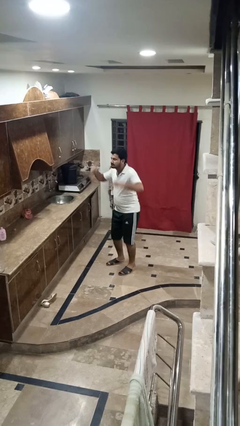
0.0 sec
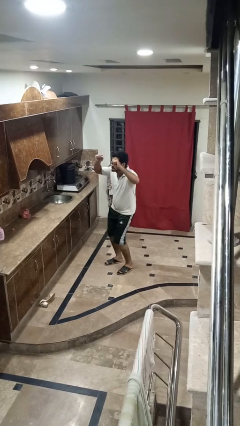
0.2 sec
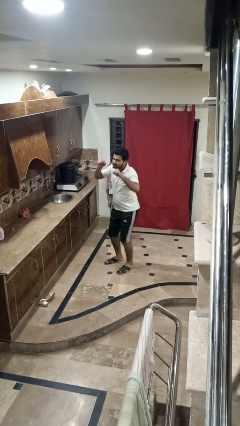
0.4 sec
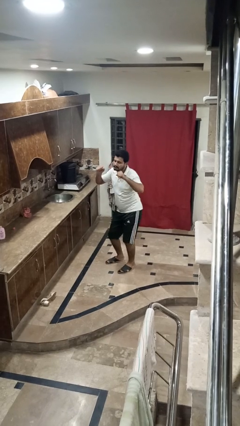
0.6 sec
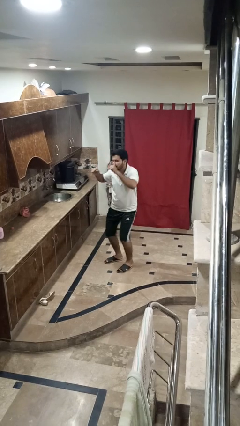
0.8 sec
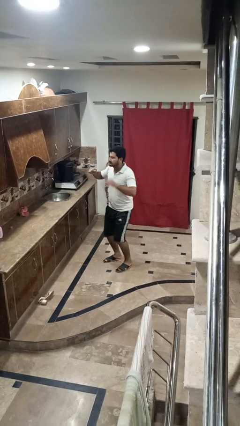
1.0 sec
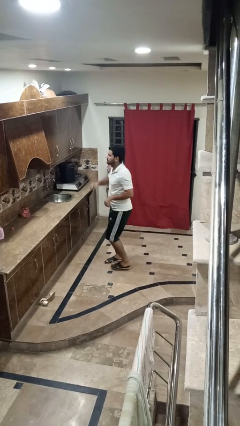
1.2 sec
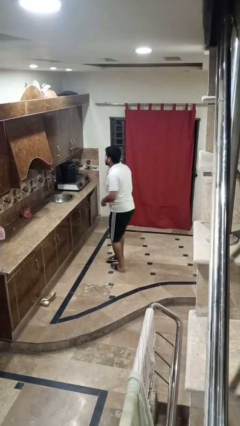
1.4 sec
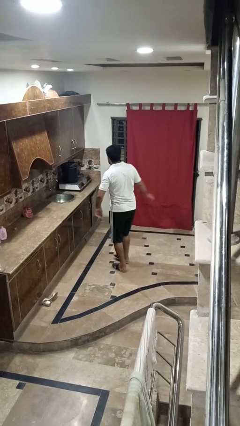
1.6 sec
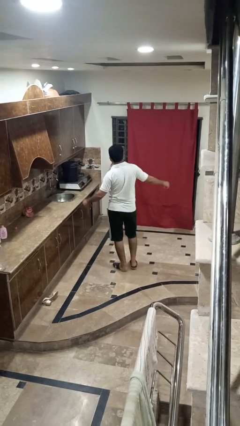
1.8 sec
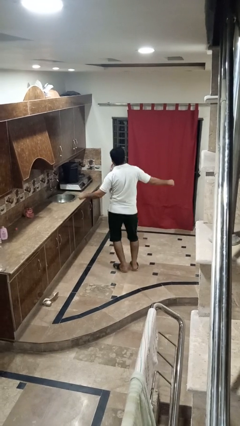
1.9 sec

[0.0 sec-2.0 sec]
person wiggles hips

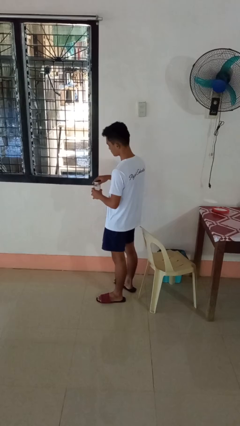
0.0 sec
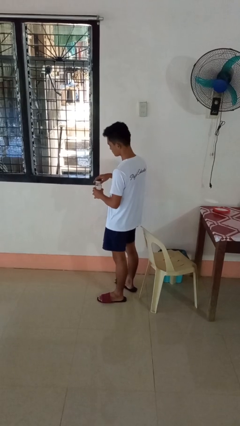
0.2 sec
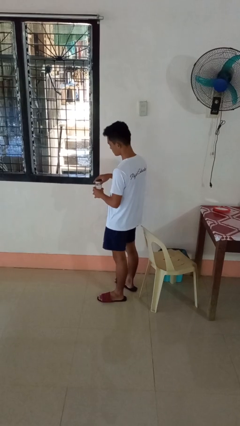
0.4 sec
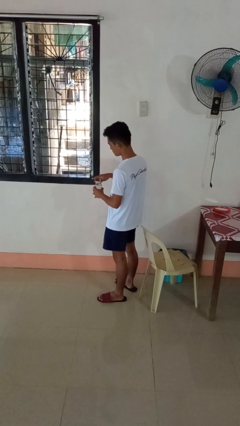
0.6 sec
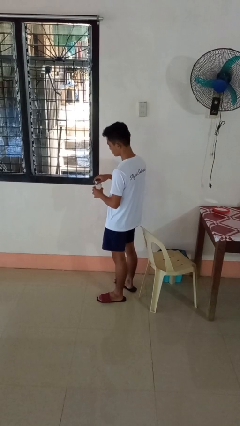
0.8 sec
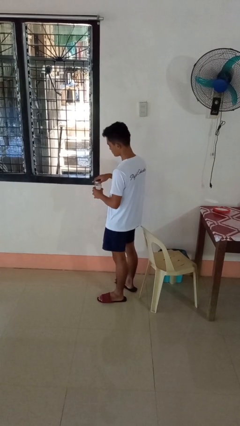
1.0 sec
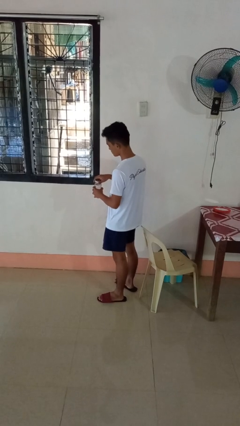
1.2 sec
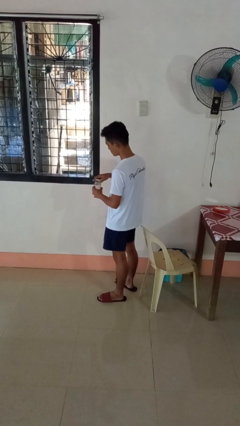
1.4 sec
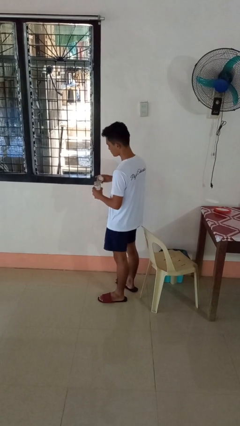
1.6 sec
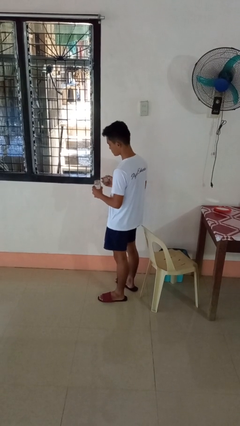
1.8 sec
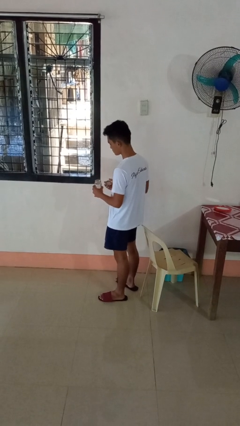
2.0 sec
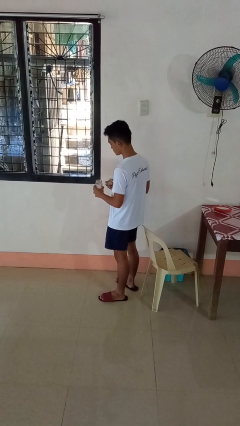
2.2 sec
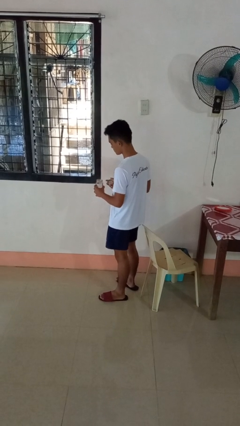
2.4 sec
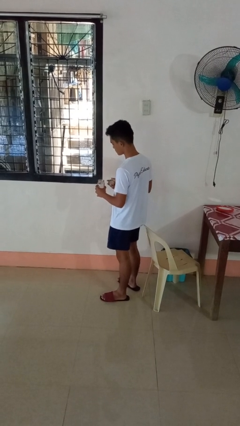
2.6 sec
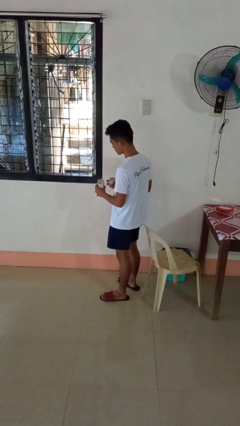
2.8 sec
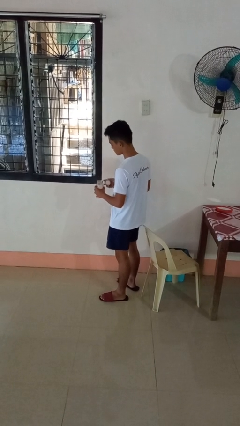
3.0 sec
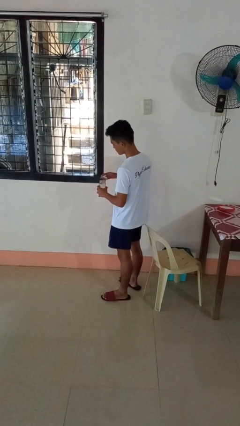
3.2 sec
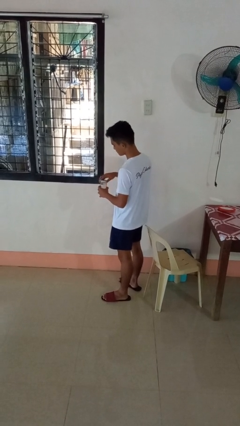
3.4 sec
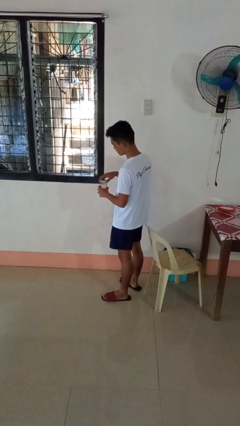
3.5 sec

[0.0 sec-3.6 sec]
person opens jar

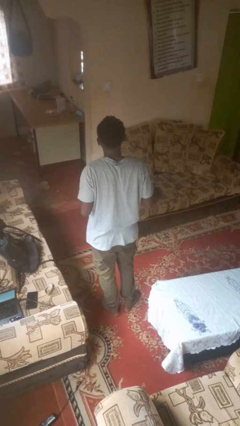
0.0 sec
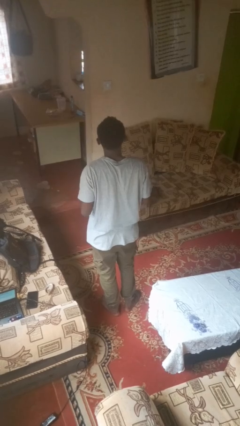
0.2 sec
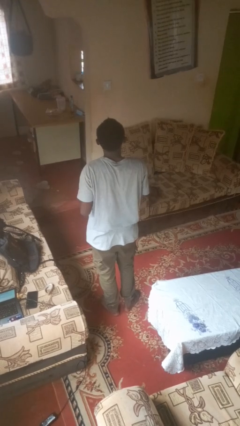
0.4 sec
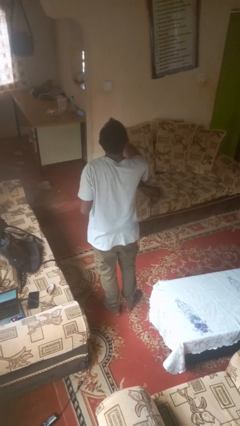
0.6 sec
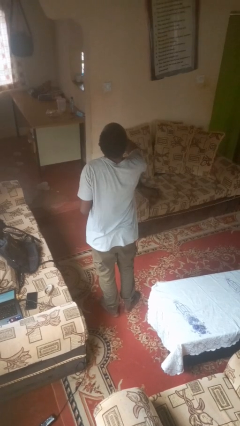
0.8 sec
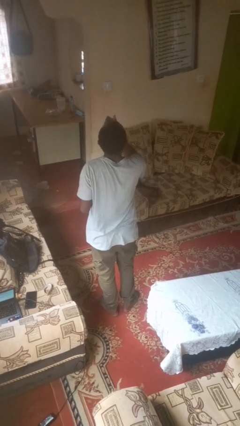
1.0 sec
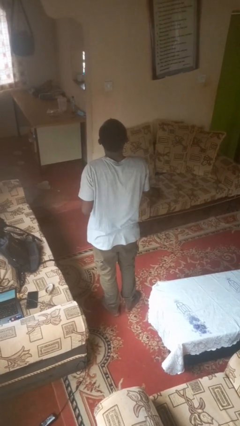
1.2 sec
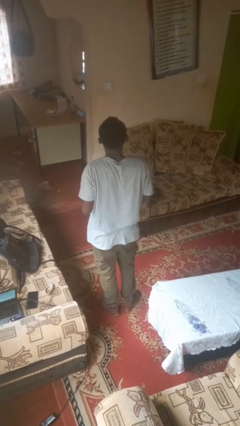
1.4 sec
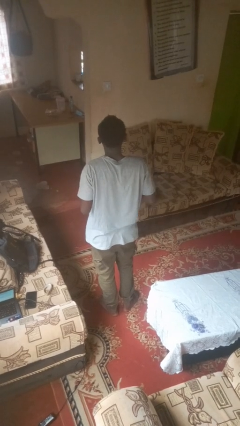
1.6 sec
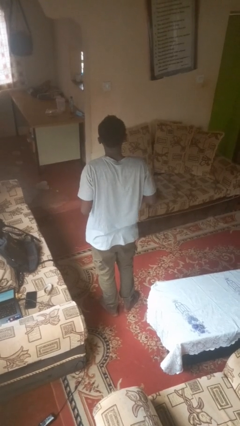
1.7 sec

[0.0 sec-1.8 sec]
person takes medicine pills

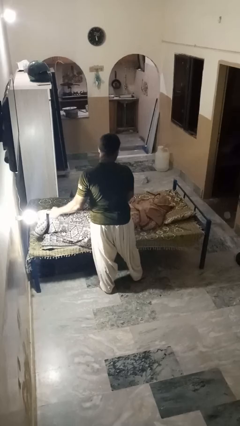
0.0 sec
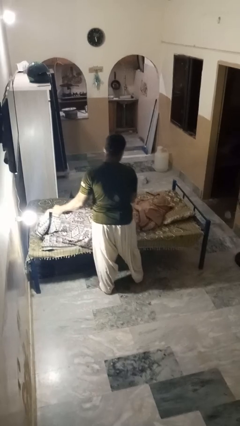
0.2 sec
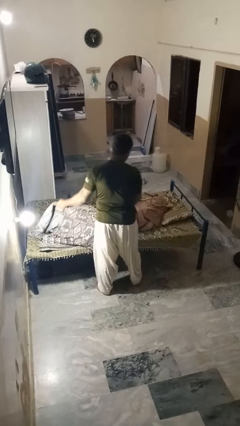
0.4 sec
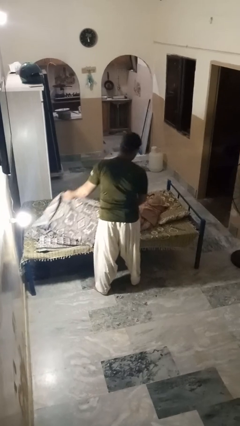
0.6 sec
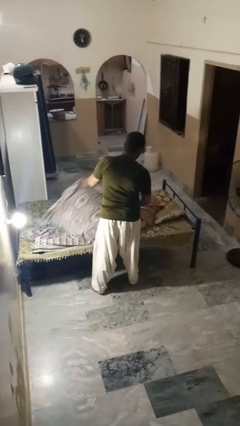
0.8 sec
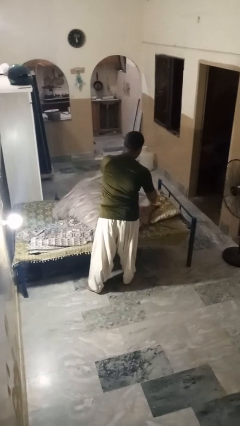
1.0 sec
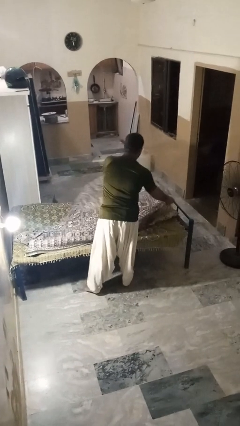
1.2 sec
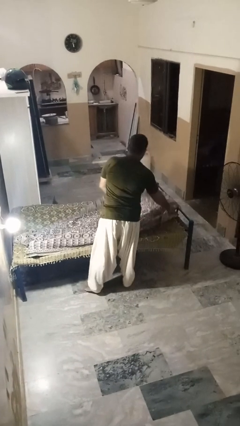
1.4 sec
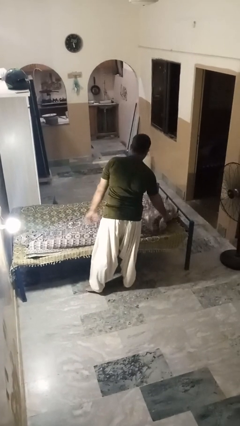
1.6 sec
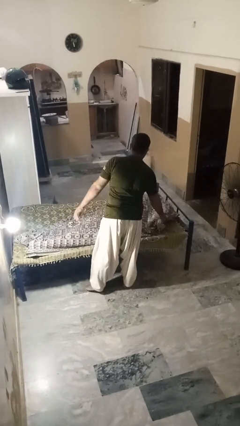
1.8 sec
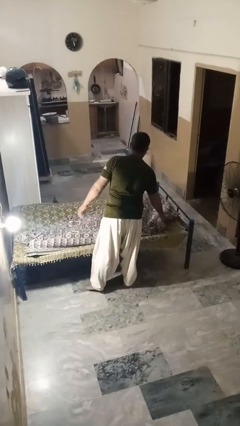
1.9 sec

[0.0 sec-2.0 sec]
person covers friend with blanket

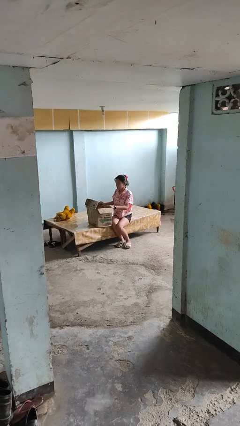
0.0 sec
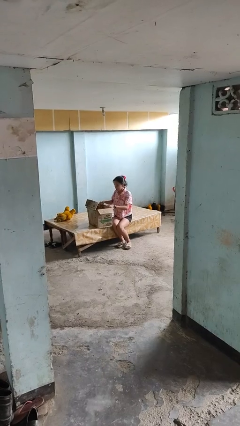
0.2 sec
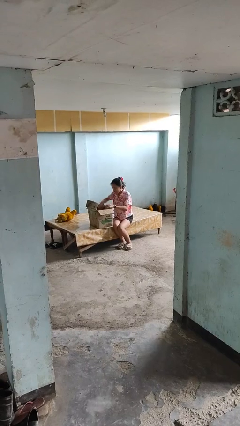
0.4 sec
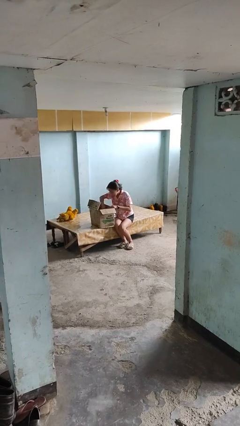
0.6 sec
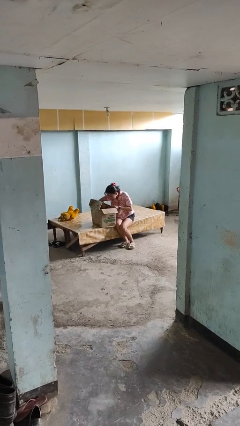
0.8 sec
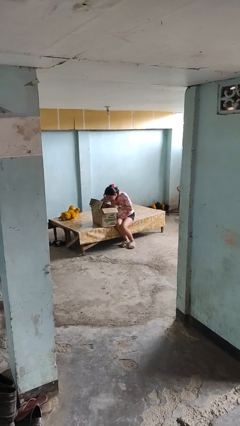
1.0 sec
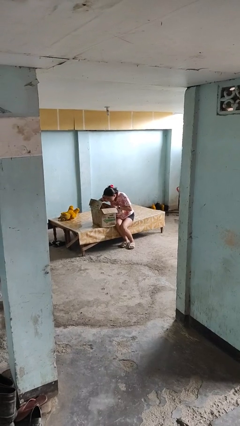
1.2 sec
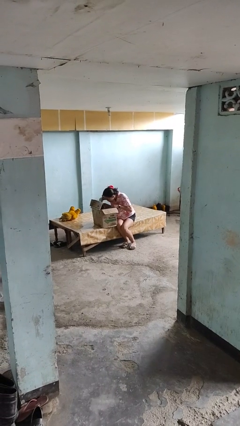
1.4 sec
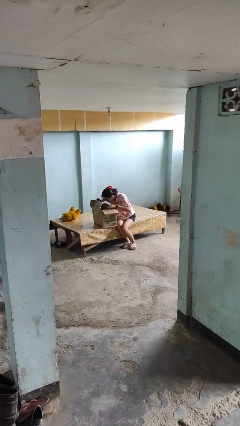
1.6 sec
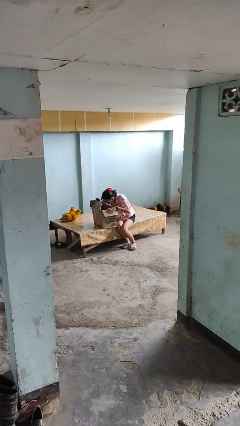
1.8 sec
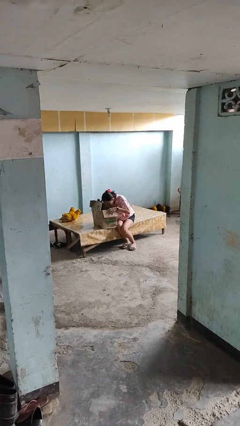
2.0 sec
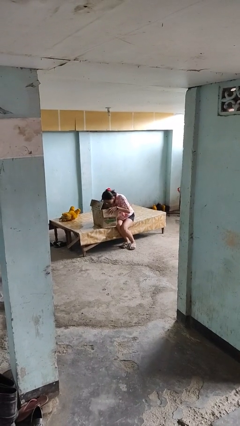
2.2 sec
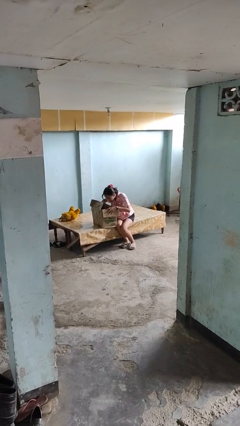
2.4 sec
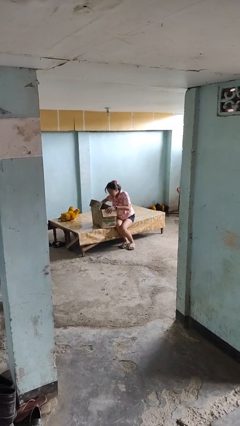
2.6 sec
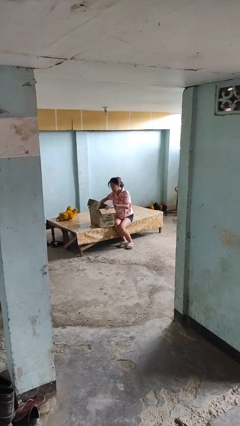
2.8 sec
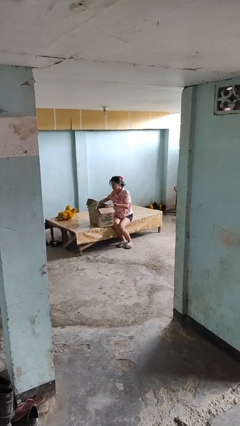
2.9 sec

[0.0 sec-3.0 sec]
person searches in box

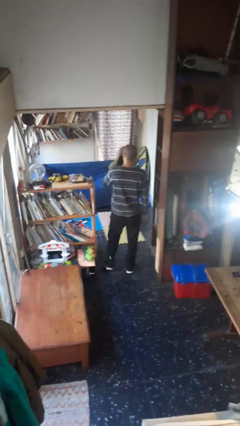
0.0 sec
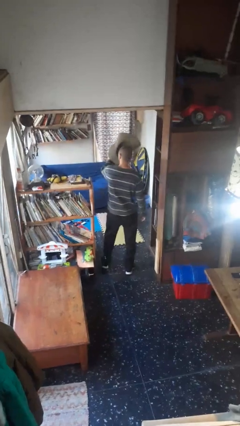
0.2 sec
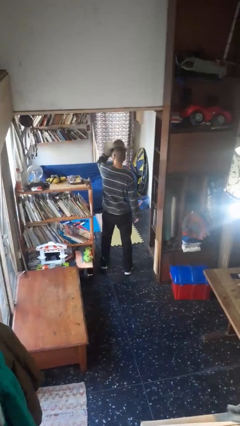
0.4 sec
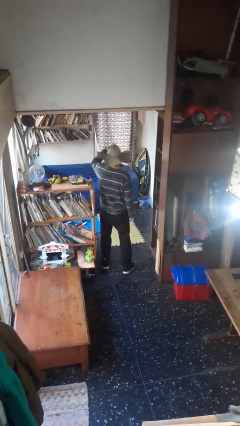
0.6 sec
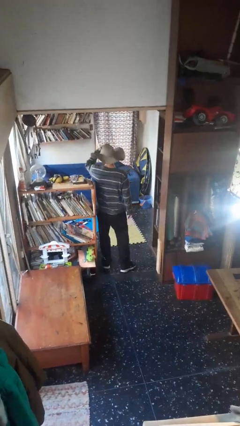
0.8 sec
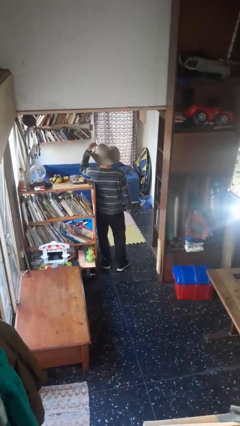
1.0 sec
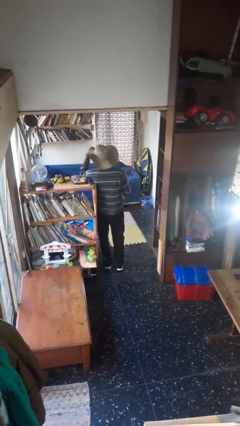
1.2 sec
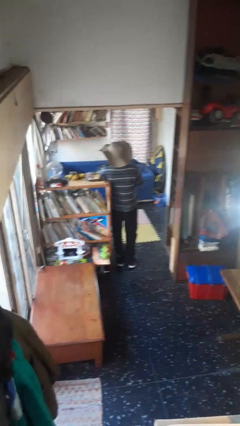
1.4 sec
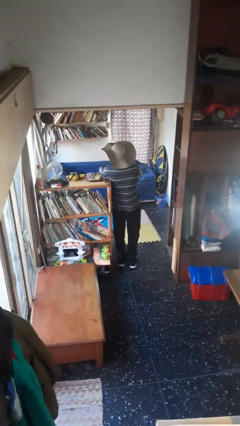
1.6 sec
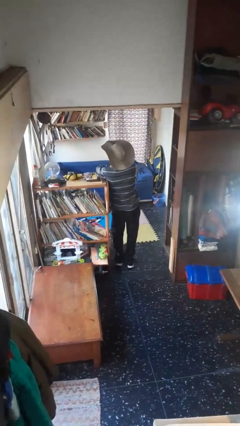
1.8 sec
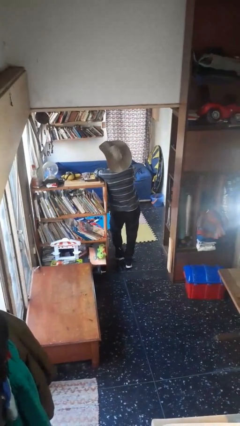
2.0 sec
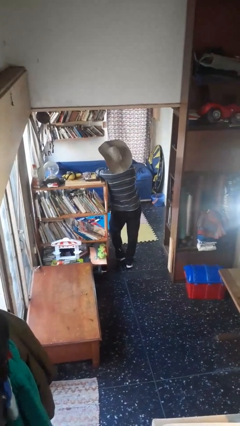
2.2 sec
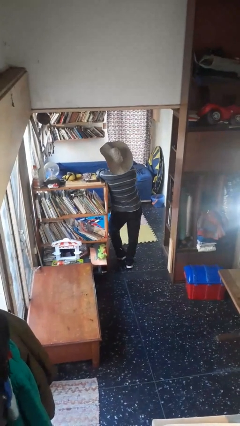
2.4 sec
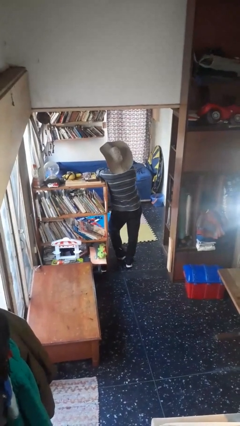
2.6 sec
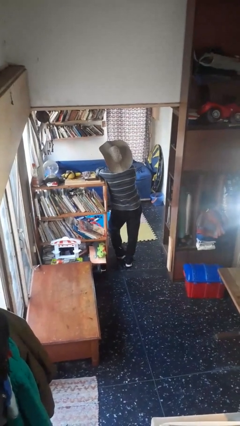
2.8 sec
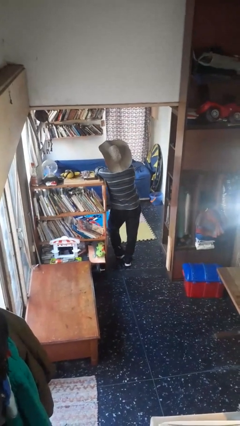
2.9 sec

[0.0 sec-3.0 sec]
person puts on hat

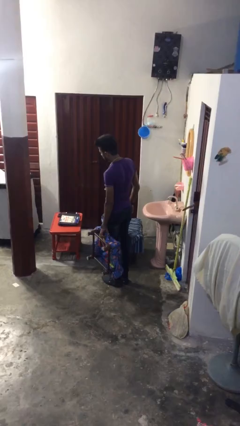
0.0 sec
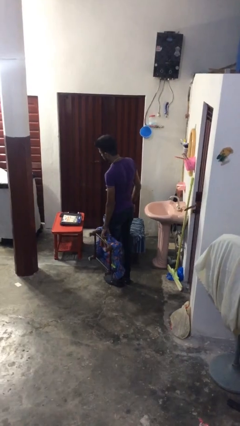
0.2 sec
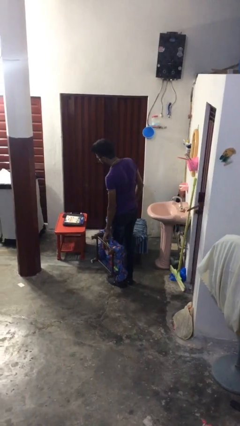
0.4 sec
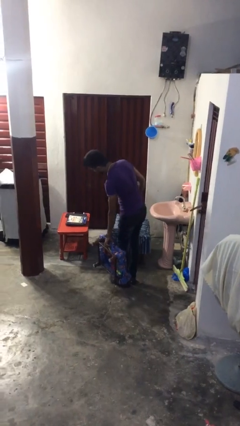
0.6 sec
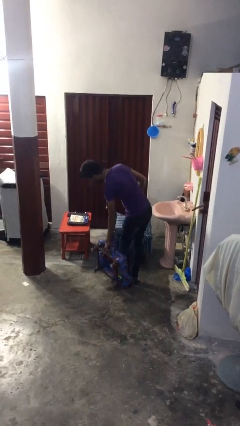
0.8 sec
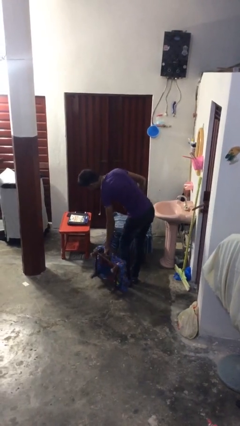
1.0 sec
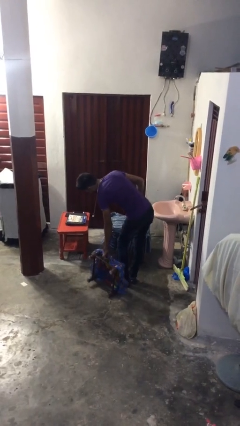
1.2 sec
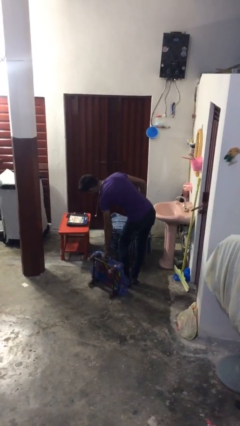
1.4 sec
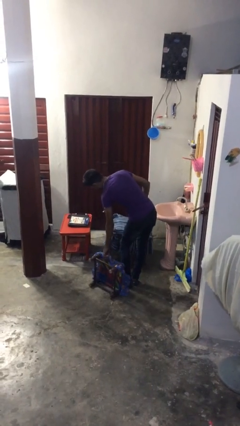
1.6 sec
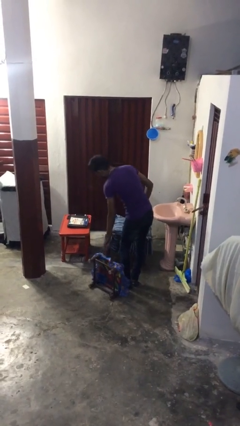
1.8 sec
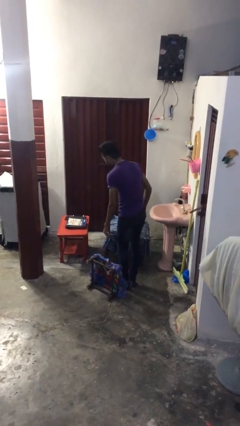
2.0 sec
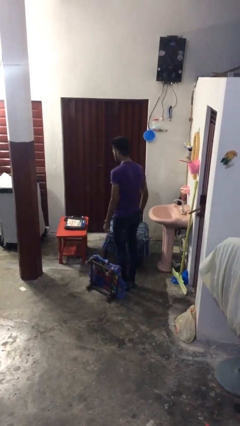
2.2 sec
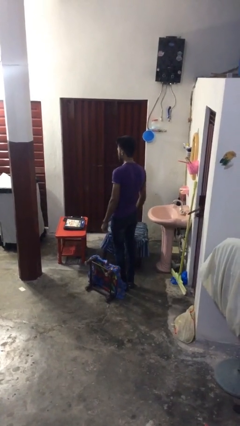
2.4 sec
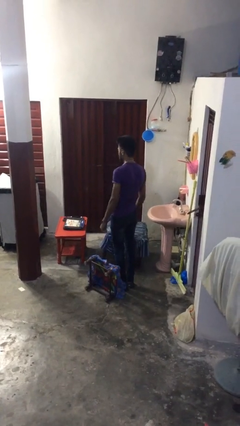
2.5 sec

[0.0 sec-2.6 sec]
person puts down object on floor
